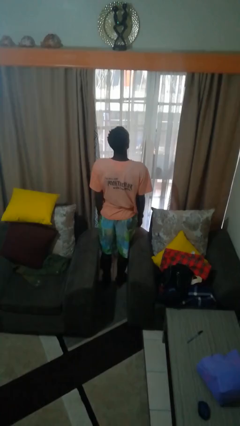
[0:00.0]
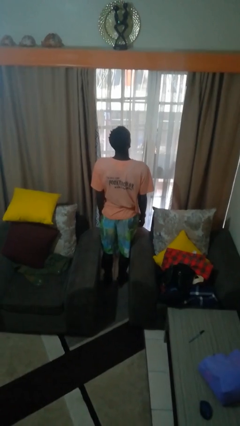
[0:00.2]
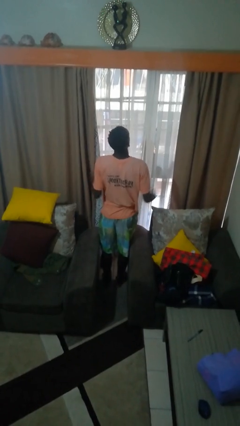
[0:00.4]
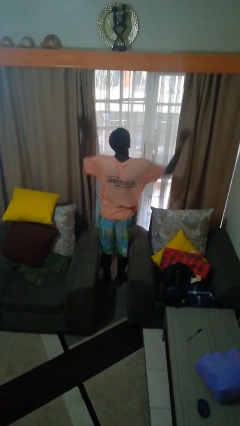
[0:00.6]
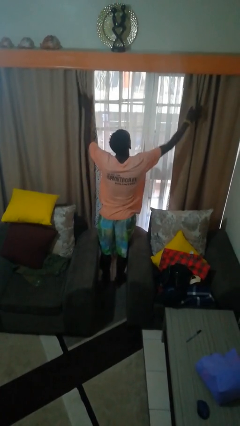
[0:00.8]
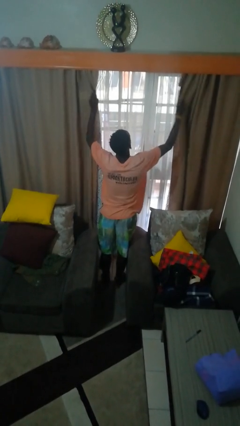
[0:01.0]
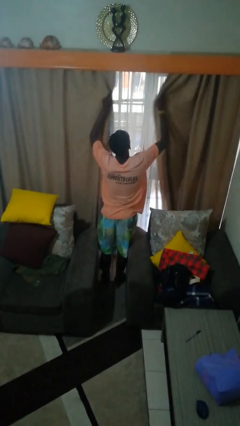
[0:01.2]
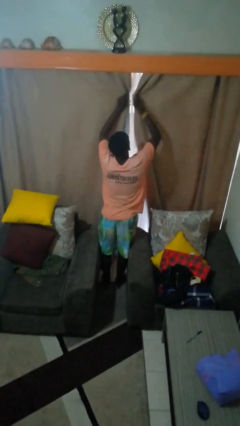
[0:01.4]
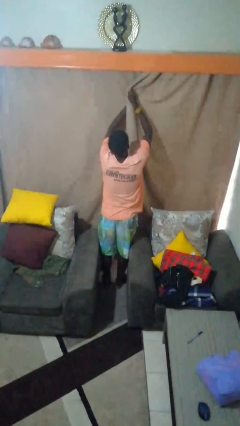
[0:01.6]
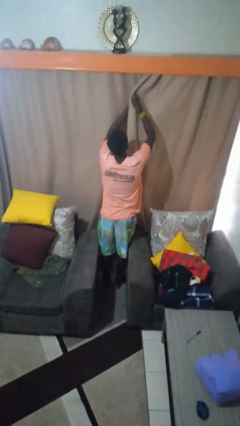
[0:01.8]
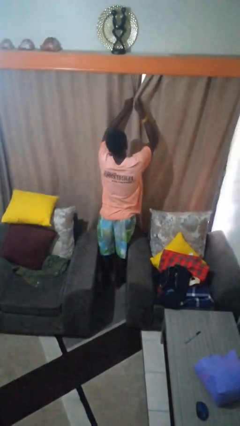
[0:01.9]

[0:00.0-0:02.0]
person closes curtains

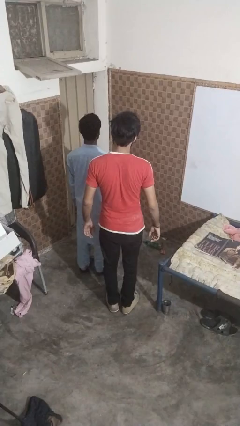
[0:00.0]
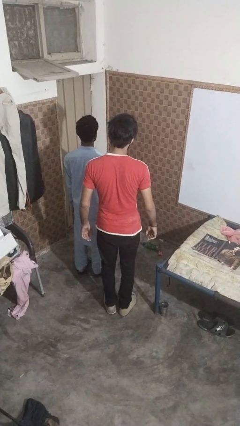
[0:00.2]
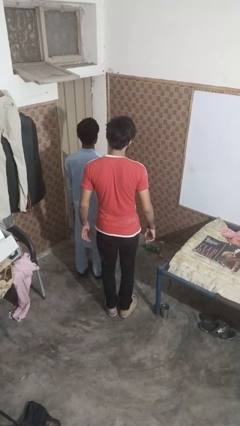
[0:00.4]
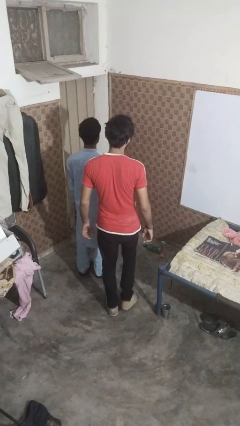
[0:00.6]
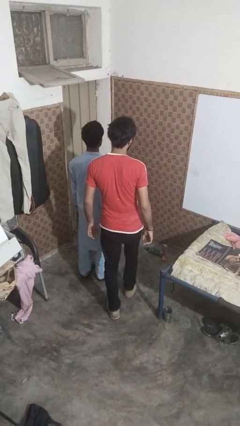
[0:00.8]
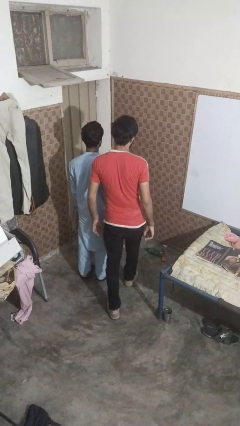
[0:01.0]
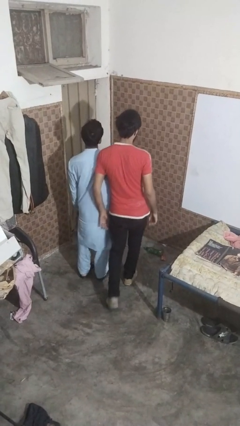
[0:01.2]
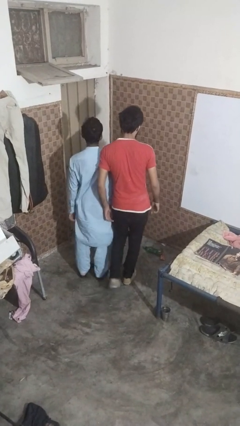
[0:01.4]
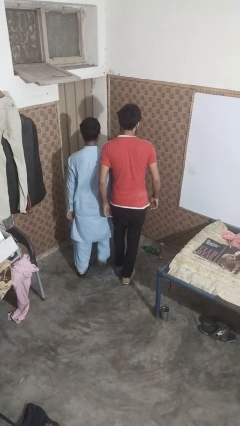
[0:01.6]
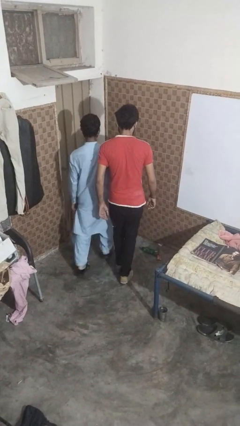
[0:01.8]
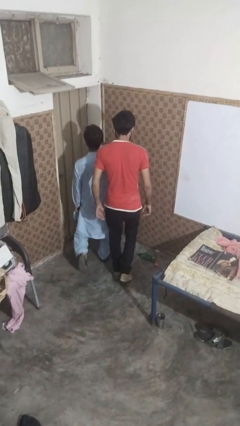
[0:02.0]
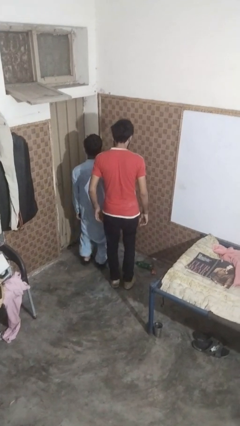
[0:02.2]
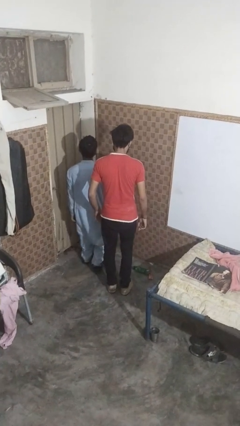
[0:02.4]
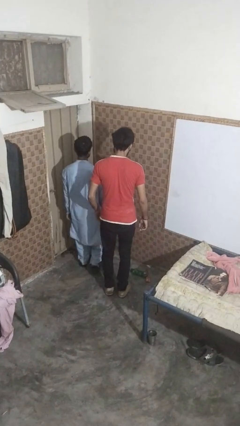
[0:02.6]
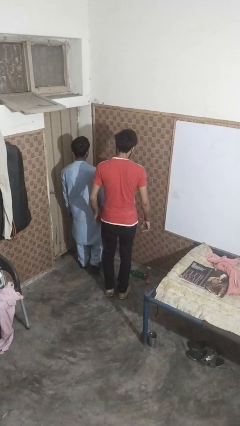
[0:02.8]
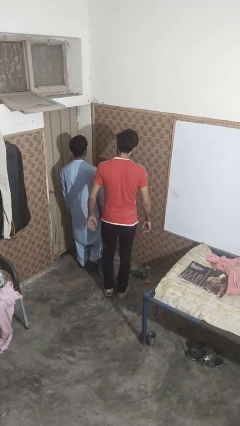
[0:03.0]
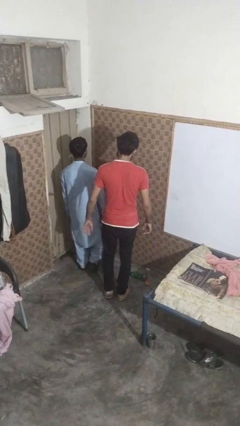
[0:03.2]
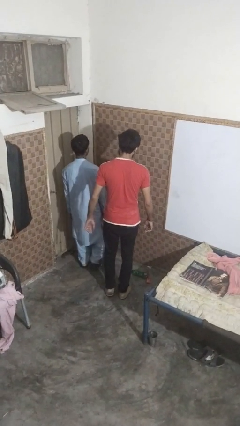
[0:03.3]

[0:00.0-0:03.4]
person bumps into person

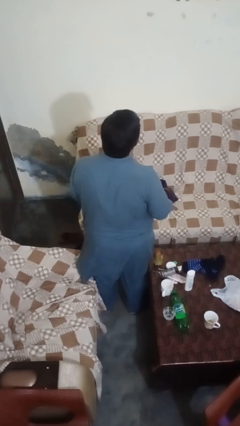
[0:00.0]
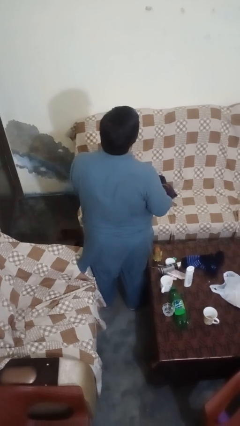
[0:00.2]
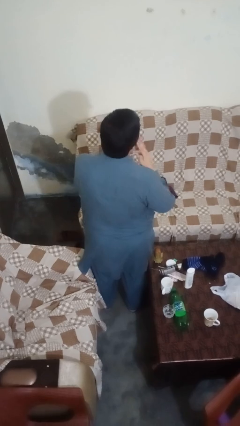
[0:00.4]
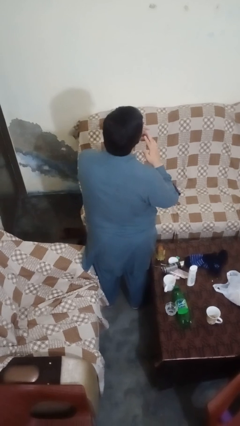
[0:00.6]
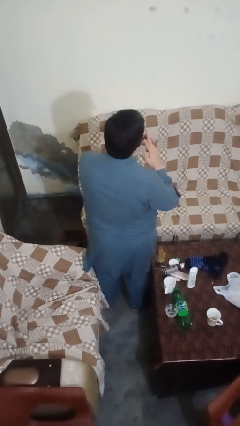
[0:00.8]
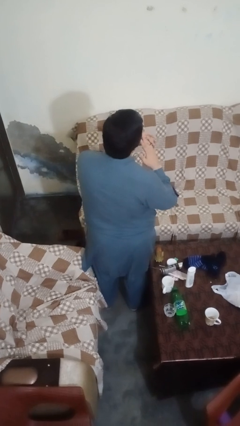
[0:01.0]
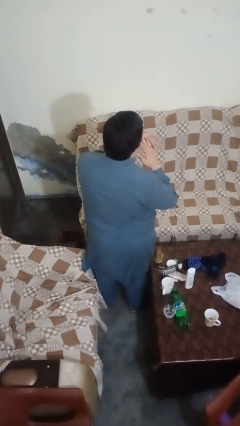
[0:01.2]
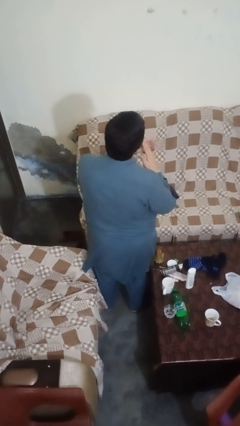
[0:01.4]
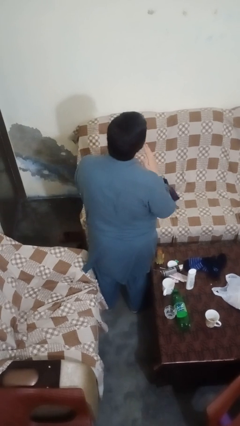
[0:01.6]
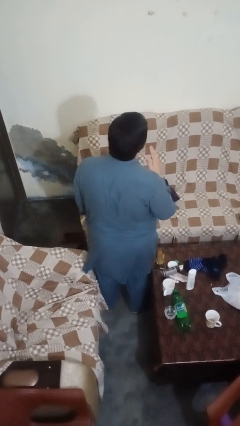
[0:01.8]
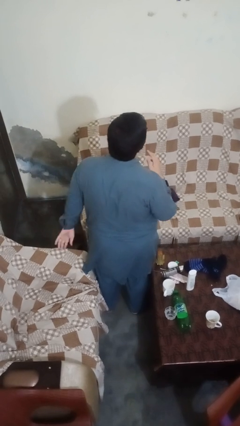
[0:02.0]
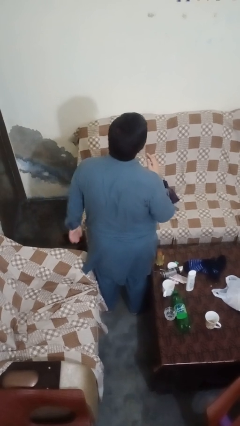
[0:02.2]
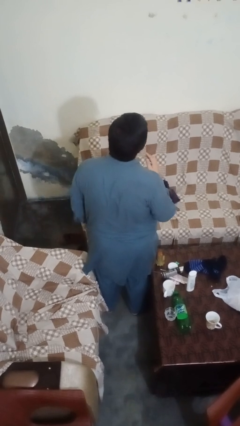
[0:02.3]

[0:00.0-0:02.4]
person puts on ring

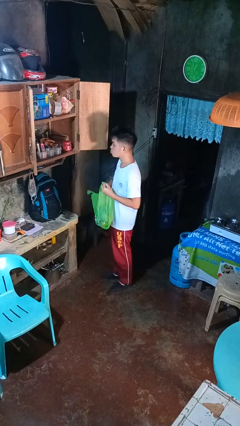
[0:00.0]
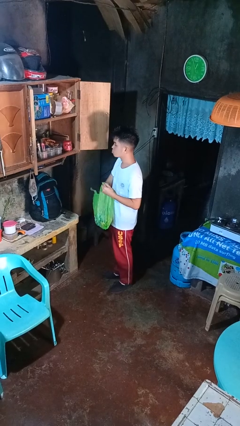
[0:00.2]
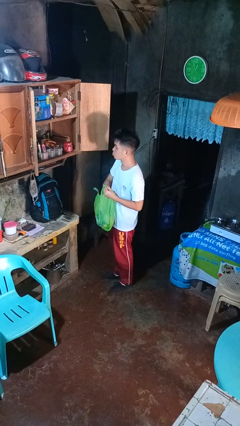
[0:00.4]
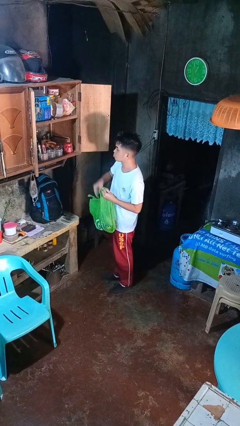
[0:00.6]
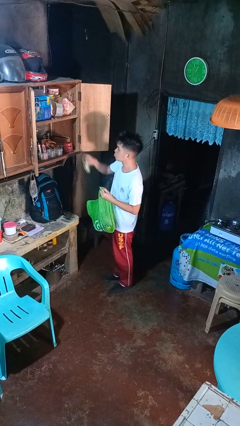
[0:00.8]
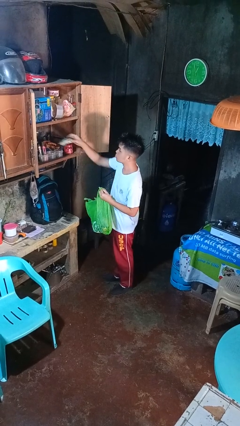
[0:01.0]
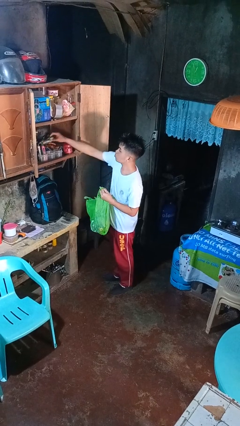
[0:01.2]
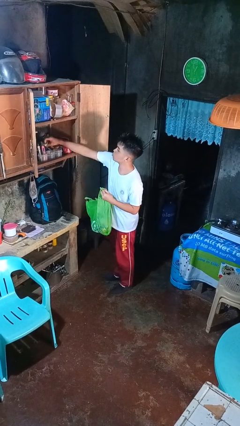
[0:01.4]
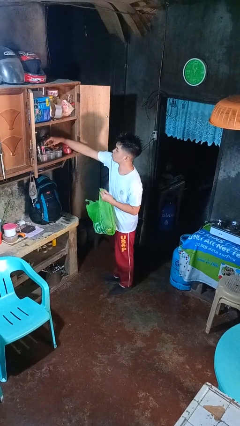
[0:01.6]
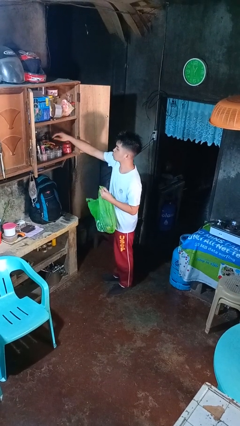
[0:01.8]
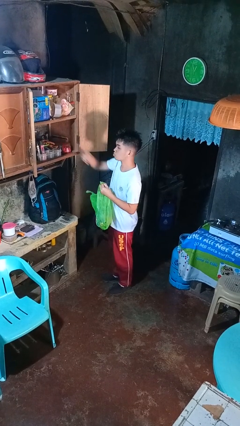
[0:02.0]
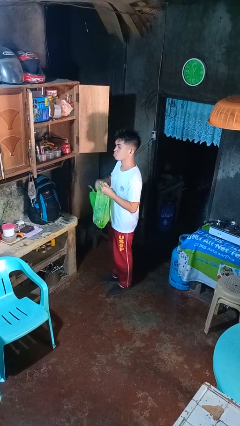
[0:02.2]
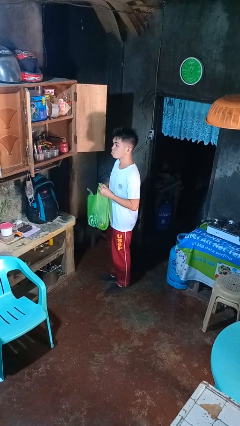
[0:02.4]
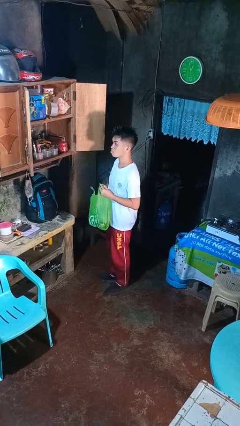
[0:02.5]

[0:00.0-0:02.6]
person loads groceries into cabinet

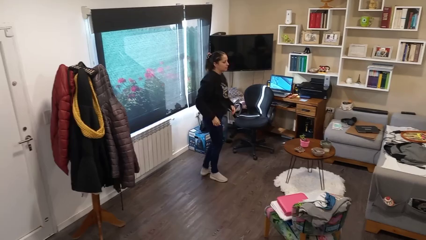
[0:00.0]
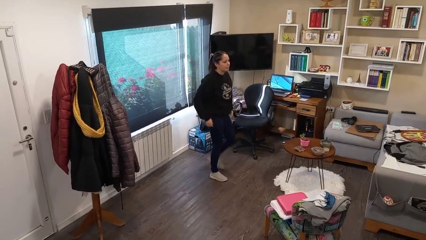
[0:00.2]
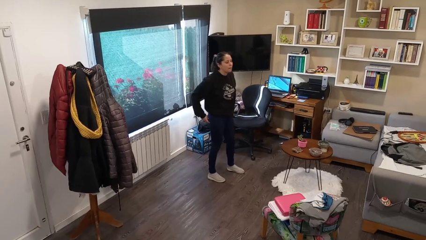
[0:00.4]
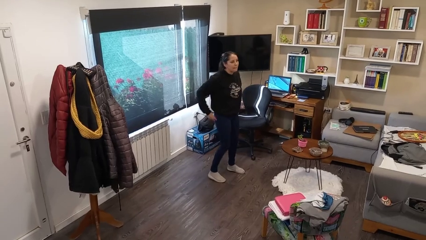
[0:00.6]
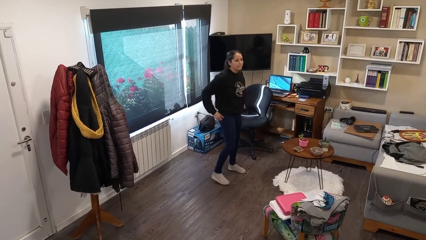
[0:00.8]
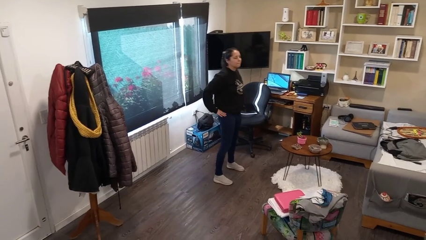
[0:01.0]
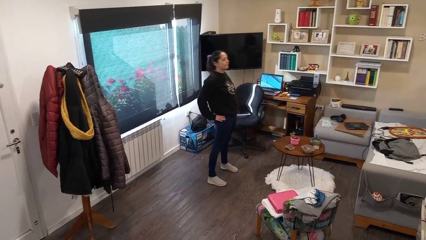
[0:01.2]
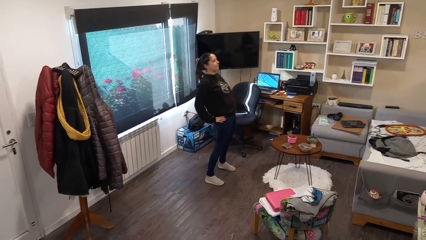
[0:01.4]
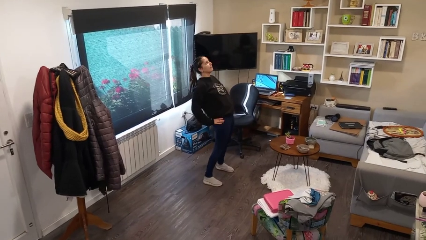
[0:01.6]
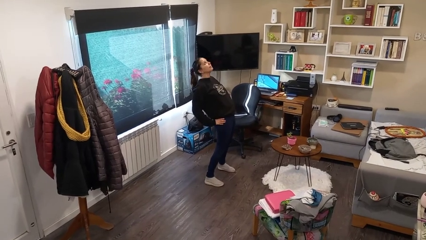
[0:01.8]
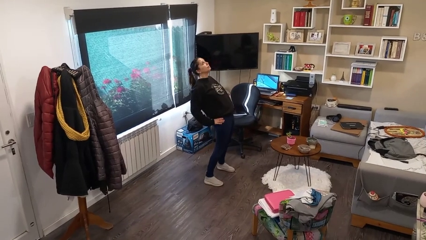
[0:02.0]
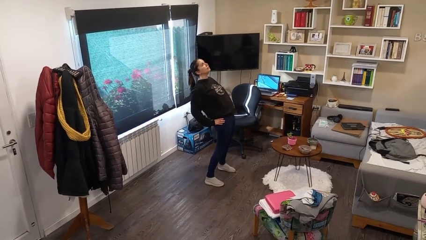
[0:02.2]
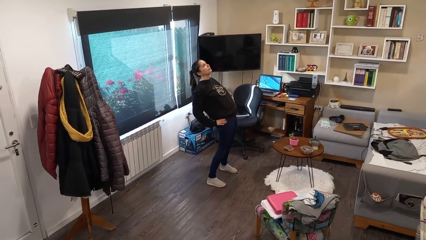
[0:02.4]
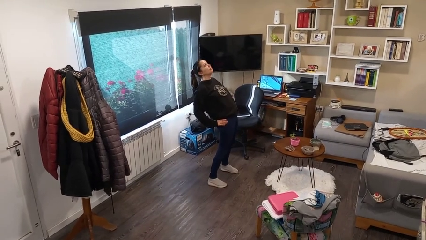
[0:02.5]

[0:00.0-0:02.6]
person stretches back

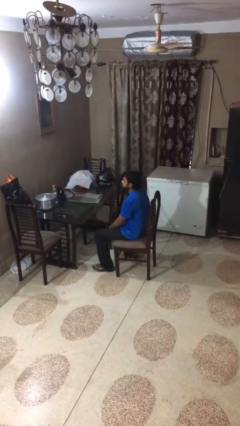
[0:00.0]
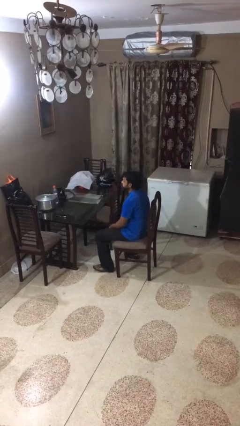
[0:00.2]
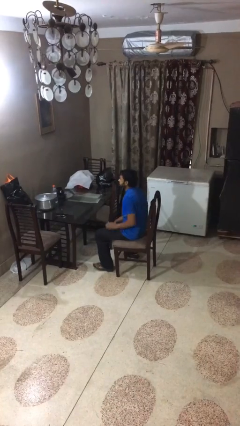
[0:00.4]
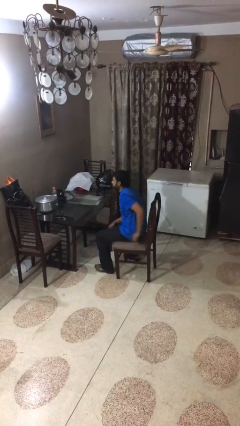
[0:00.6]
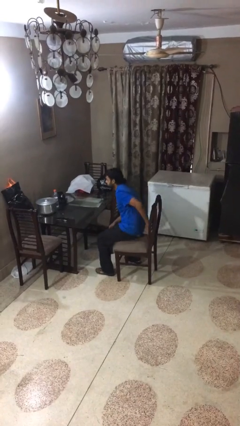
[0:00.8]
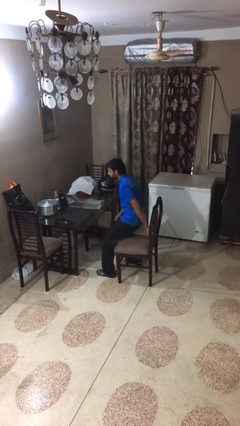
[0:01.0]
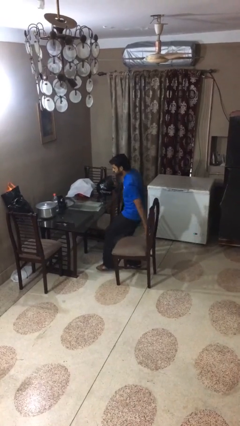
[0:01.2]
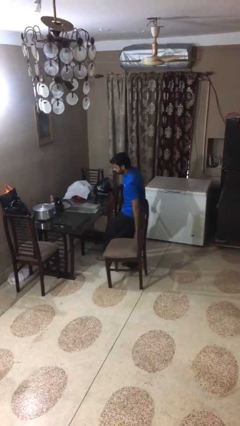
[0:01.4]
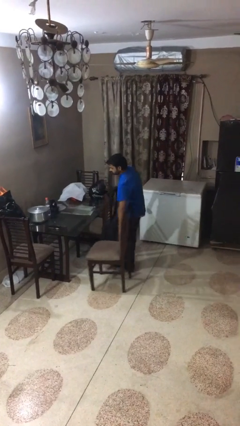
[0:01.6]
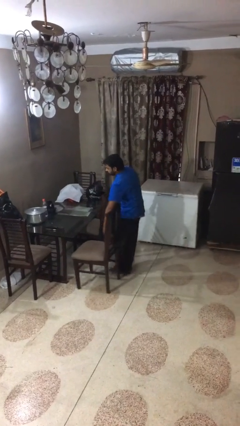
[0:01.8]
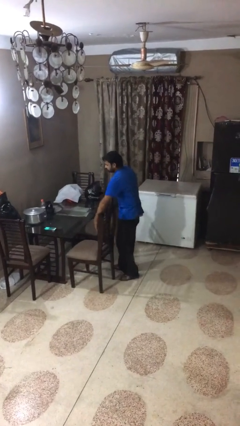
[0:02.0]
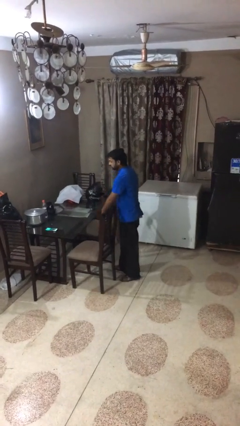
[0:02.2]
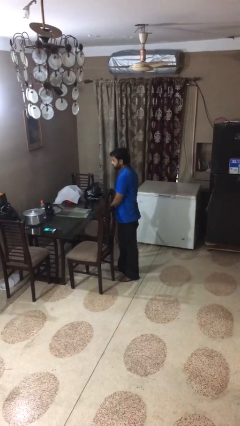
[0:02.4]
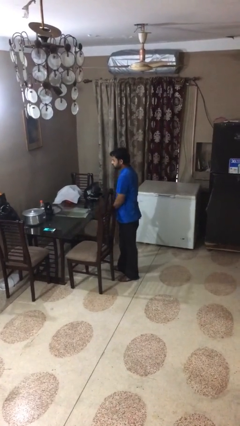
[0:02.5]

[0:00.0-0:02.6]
person stands up

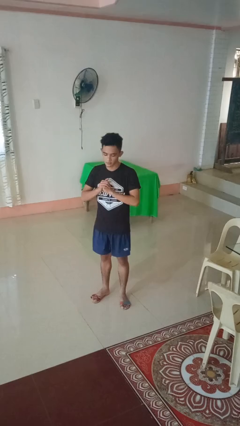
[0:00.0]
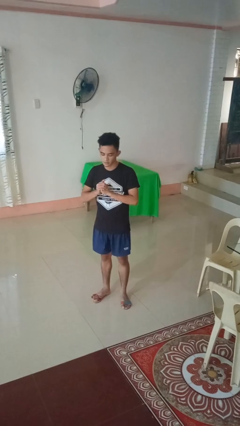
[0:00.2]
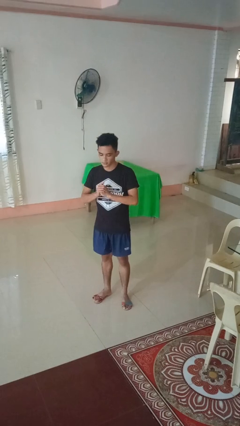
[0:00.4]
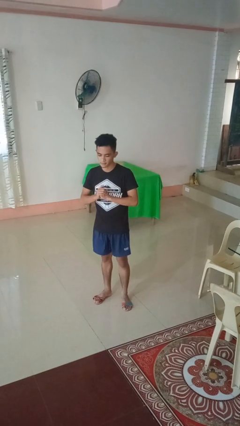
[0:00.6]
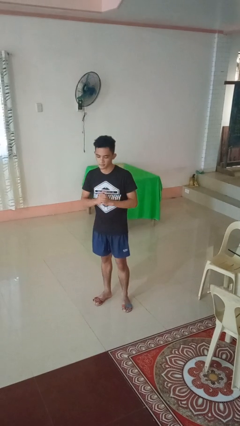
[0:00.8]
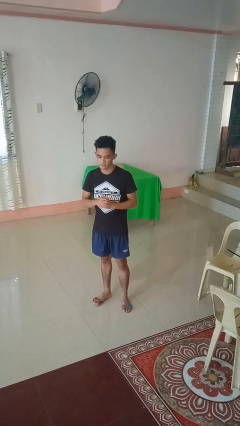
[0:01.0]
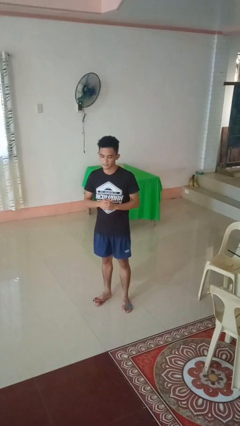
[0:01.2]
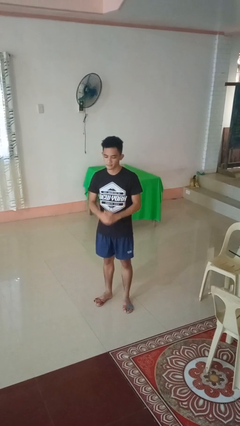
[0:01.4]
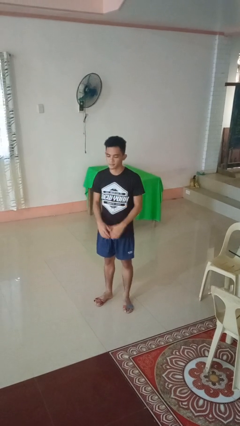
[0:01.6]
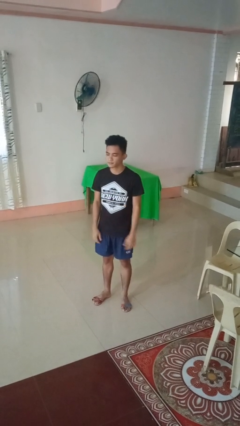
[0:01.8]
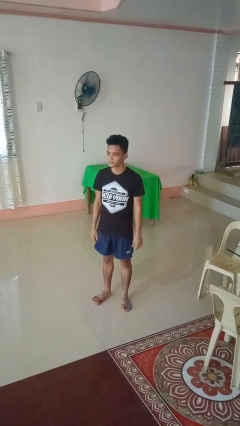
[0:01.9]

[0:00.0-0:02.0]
person cracks knuckles
